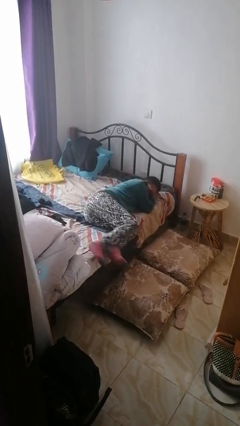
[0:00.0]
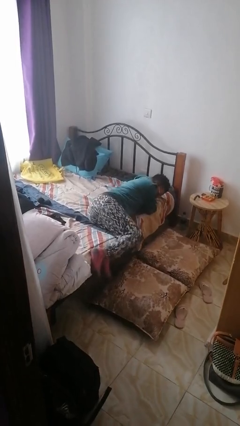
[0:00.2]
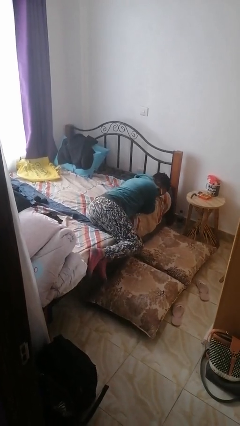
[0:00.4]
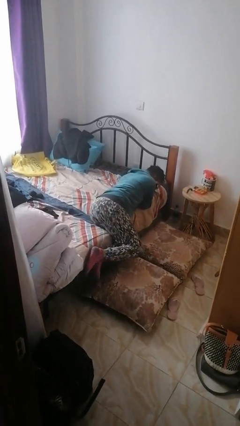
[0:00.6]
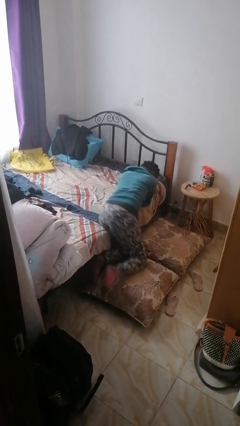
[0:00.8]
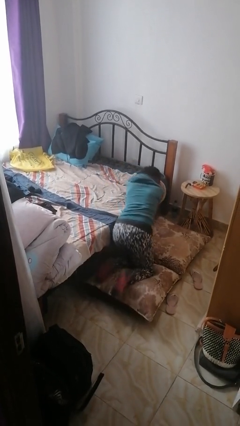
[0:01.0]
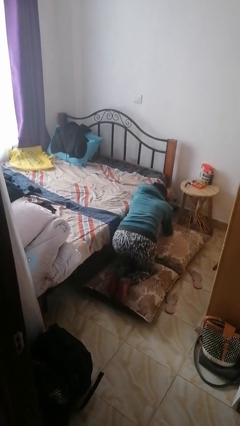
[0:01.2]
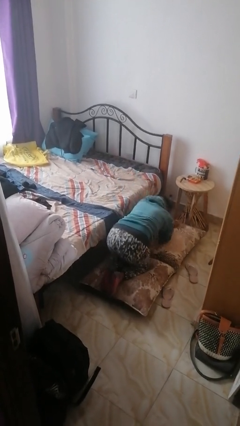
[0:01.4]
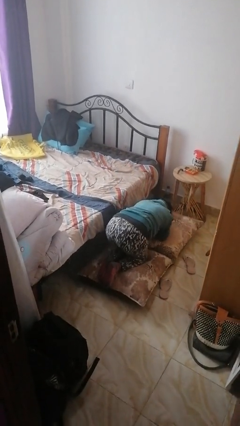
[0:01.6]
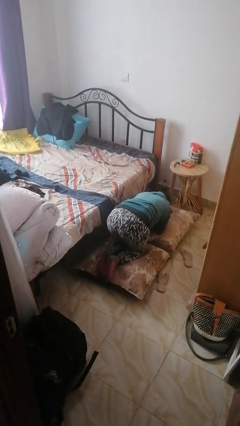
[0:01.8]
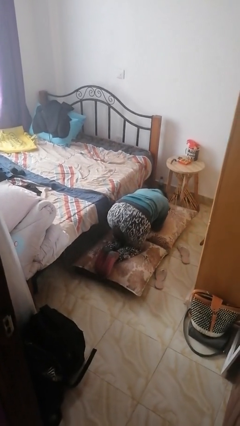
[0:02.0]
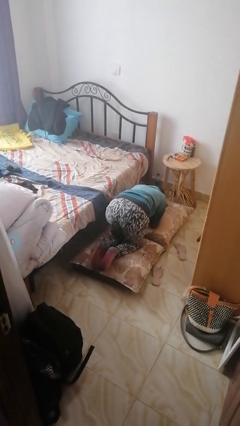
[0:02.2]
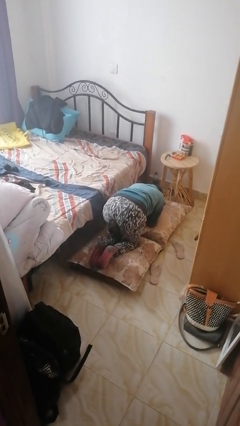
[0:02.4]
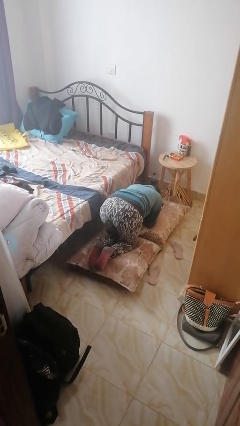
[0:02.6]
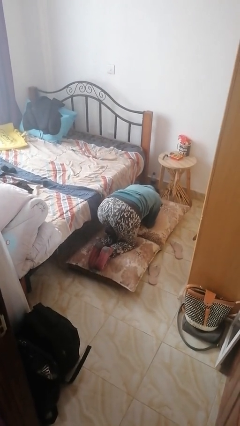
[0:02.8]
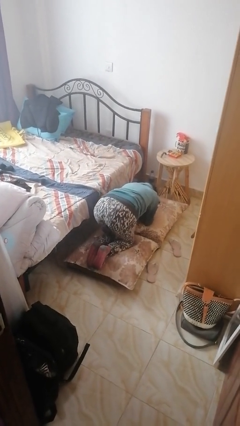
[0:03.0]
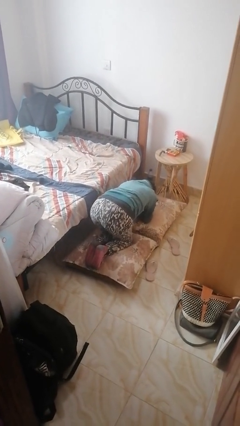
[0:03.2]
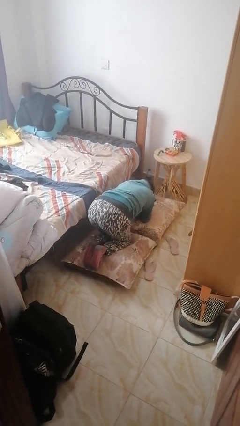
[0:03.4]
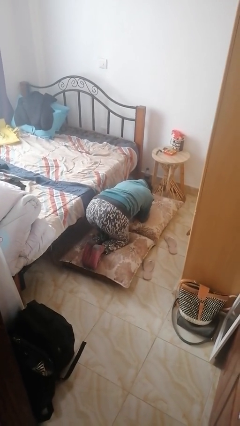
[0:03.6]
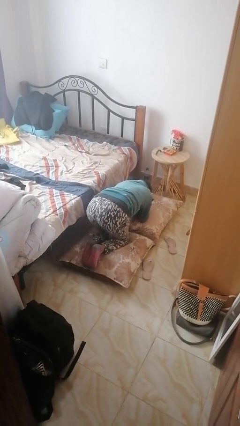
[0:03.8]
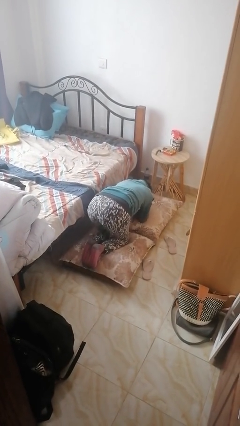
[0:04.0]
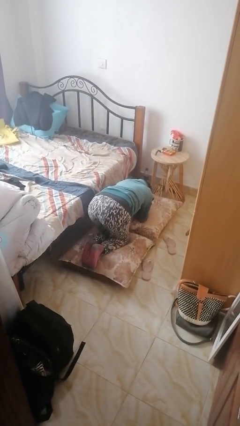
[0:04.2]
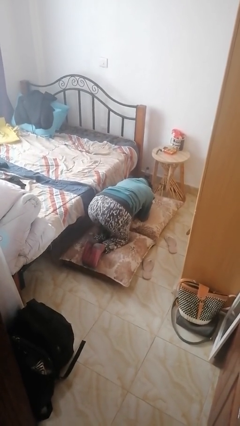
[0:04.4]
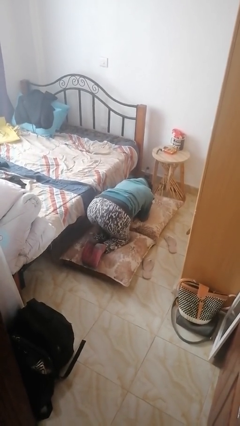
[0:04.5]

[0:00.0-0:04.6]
person falls from bed

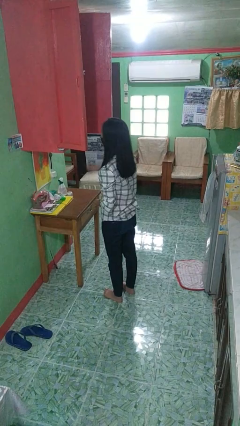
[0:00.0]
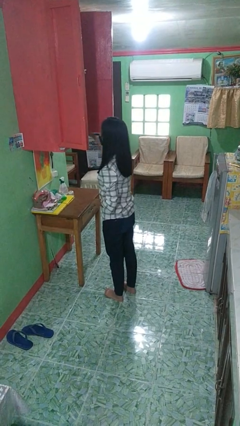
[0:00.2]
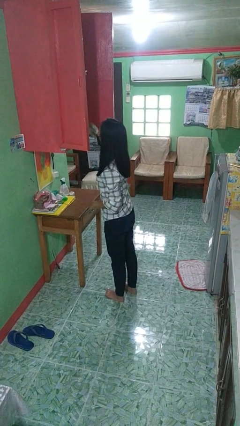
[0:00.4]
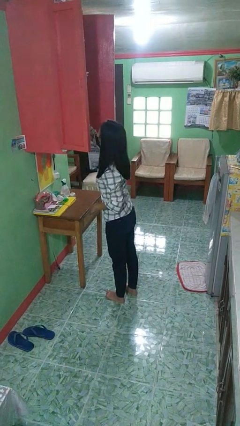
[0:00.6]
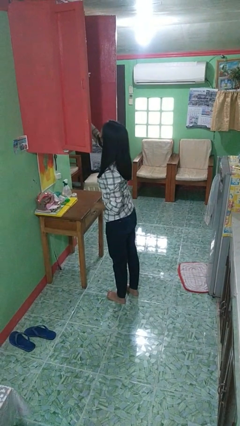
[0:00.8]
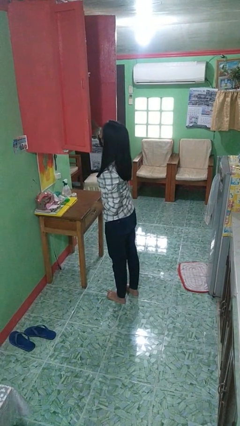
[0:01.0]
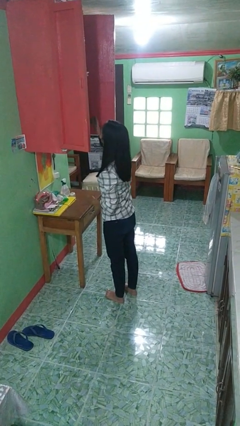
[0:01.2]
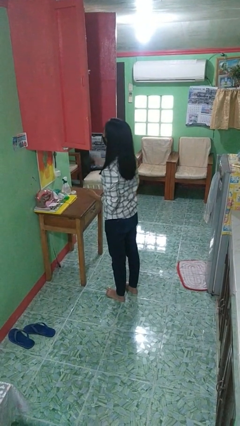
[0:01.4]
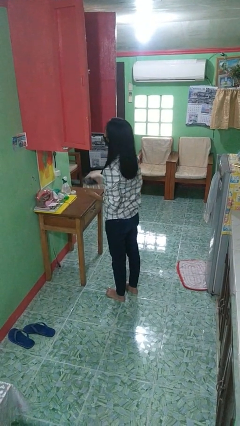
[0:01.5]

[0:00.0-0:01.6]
person picks up object from cabinet

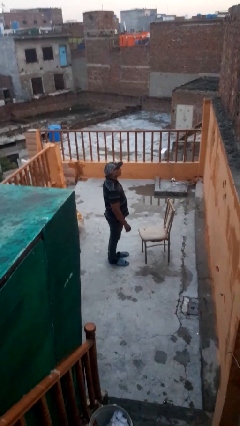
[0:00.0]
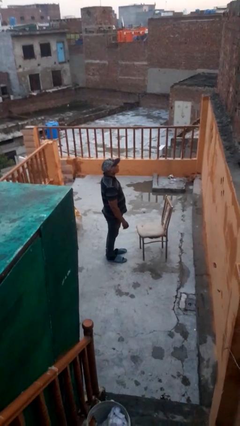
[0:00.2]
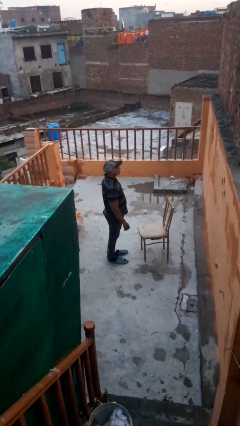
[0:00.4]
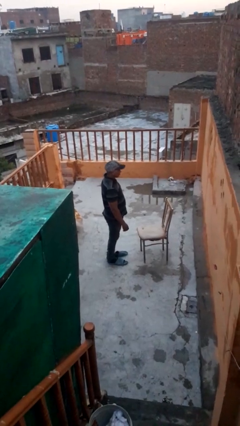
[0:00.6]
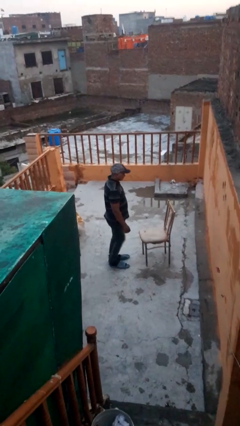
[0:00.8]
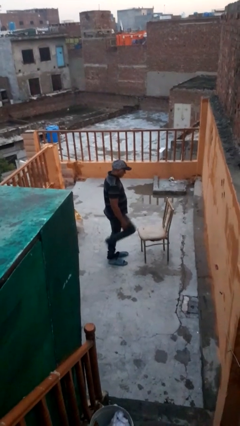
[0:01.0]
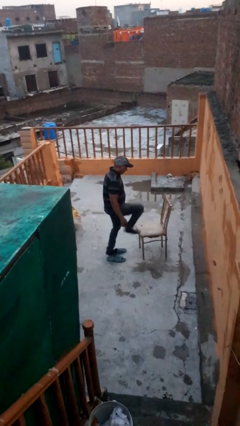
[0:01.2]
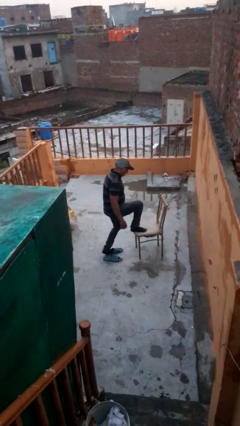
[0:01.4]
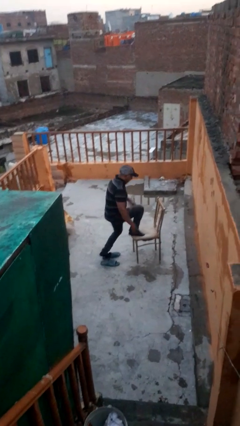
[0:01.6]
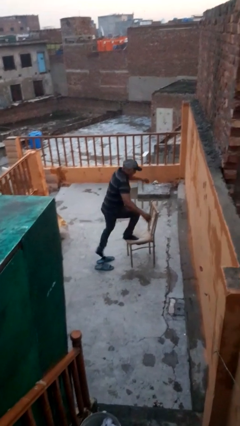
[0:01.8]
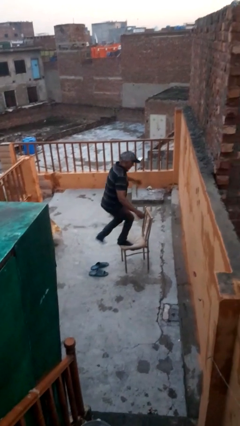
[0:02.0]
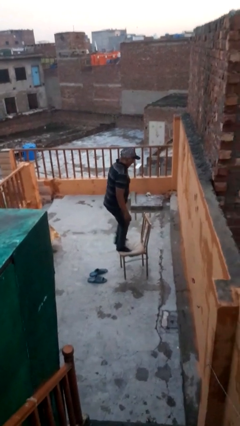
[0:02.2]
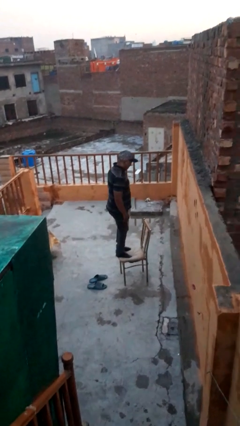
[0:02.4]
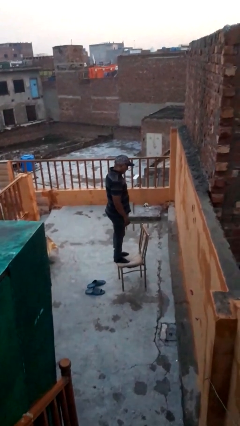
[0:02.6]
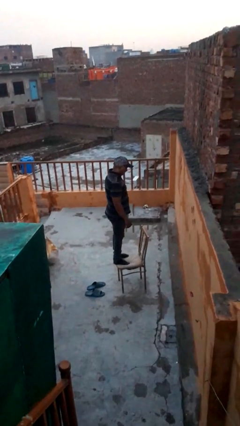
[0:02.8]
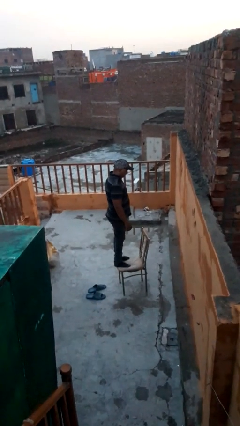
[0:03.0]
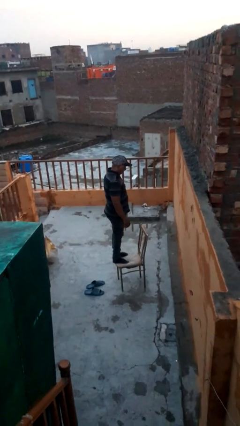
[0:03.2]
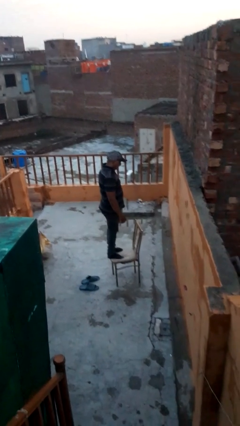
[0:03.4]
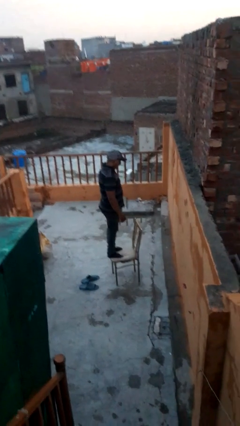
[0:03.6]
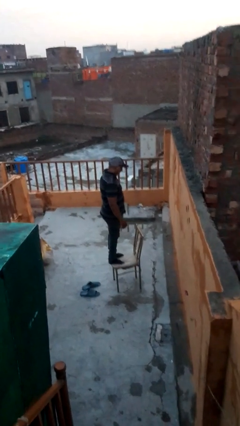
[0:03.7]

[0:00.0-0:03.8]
person climbs on chair

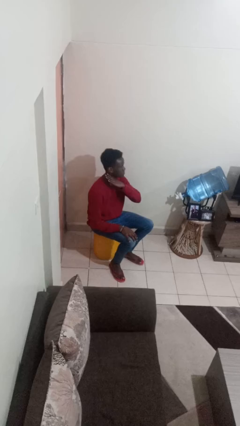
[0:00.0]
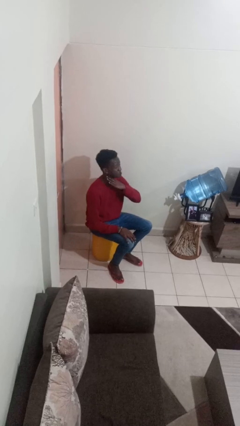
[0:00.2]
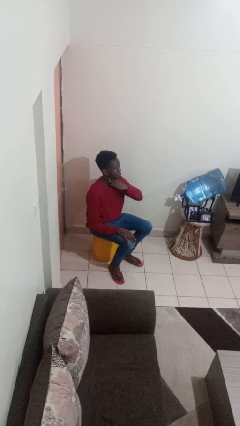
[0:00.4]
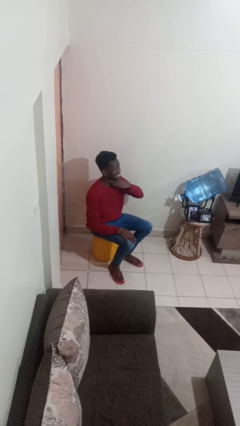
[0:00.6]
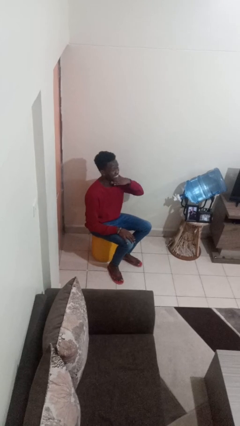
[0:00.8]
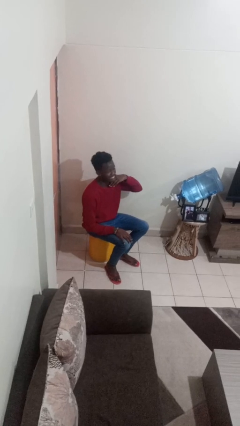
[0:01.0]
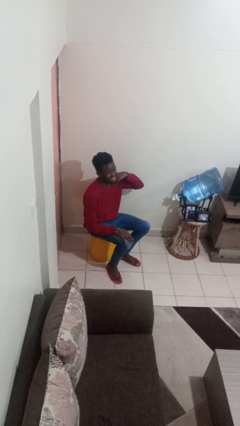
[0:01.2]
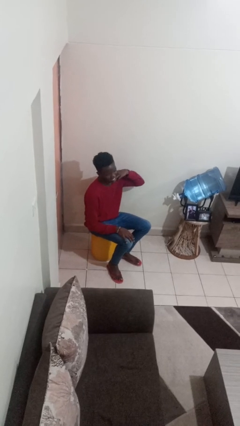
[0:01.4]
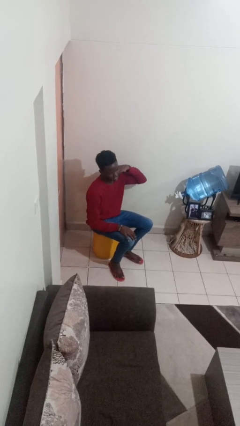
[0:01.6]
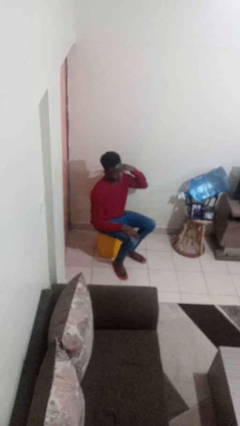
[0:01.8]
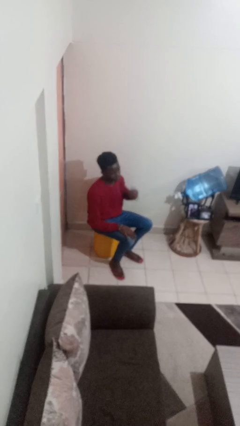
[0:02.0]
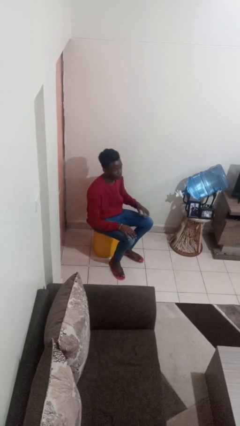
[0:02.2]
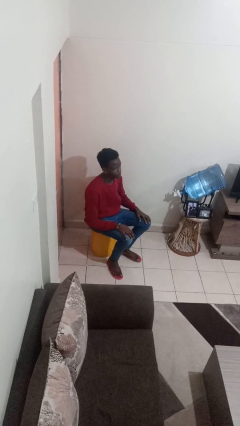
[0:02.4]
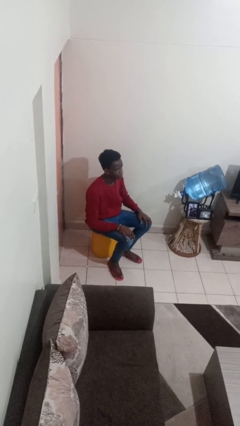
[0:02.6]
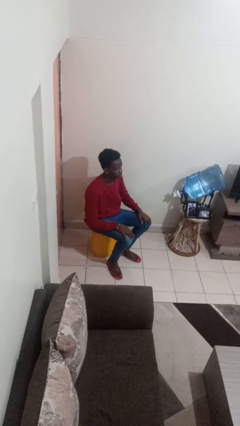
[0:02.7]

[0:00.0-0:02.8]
person gestures cut

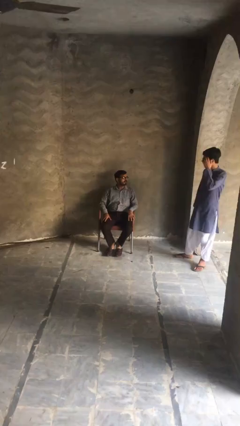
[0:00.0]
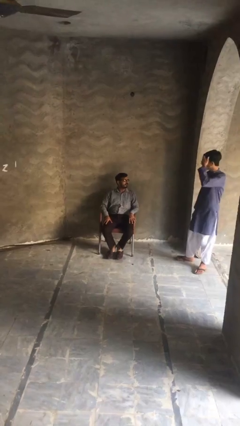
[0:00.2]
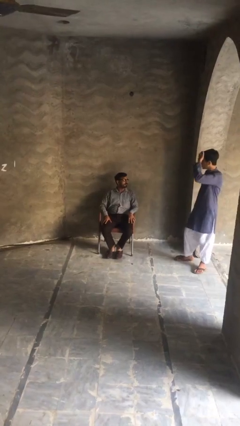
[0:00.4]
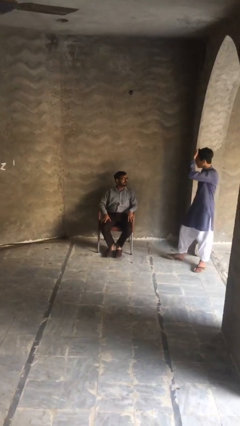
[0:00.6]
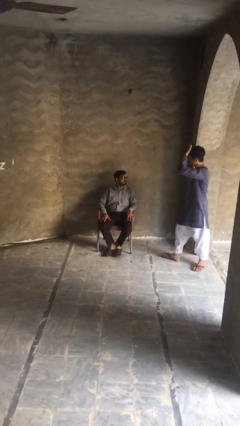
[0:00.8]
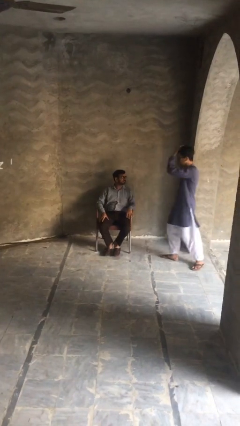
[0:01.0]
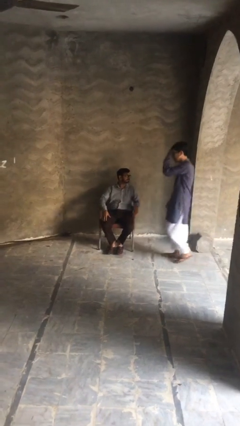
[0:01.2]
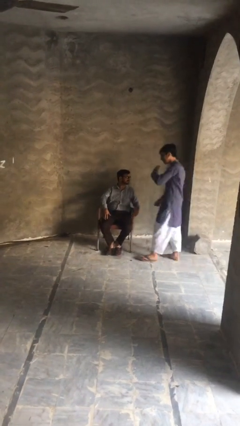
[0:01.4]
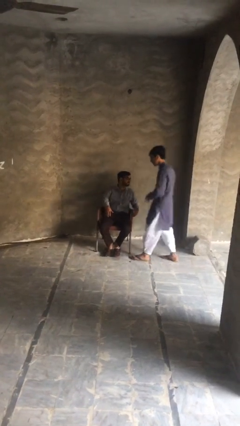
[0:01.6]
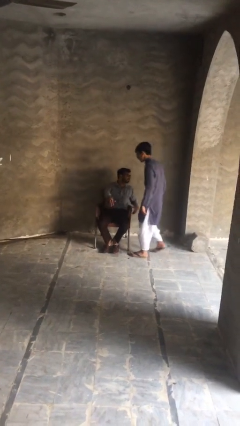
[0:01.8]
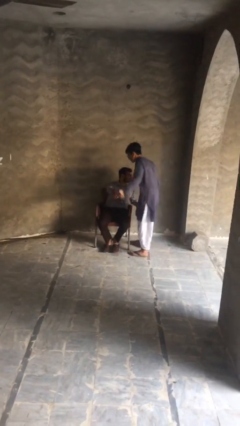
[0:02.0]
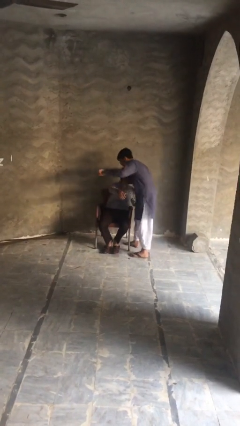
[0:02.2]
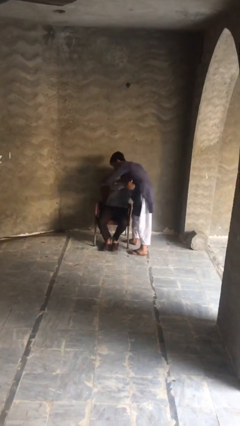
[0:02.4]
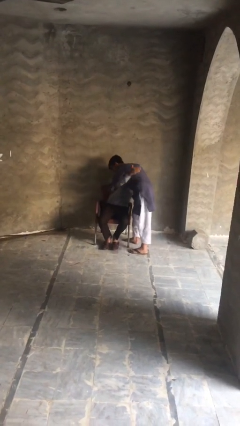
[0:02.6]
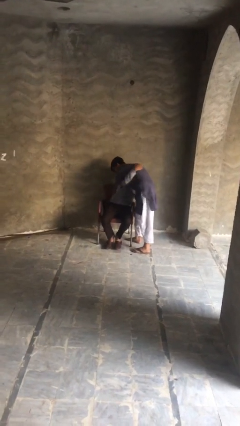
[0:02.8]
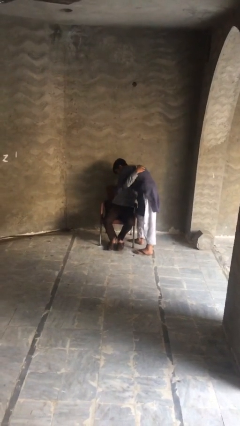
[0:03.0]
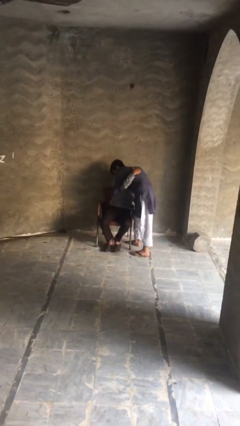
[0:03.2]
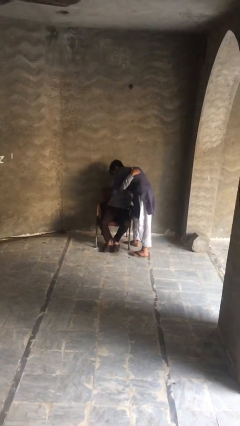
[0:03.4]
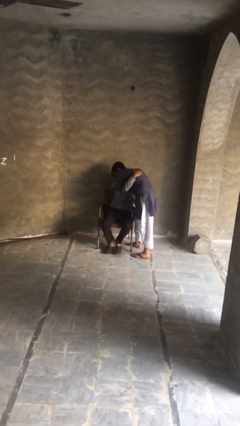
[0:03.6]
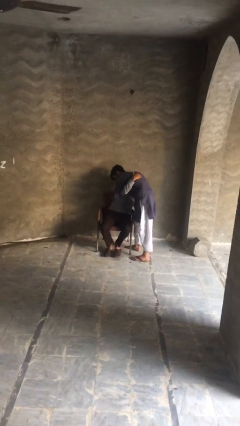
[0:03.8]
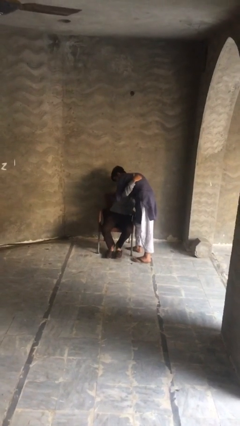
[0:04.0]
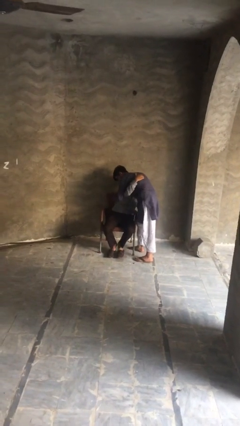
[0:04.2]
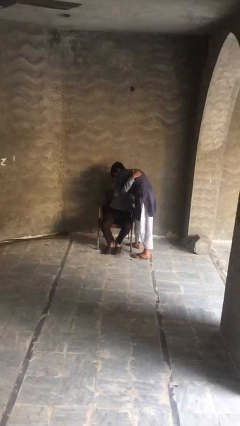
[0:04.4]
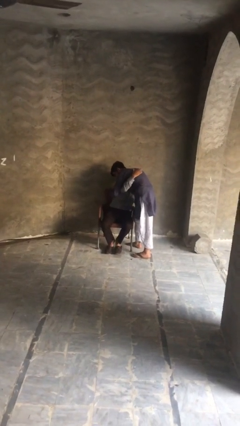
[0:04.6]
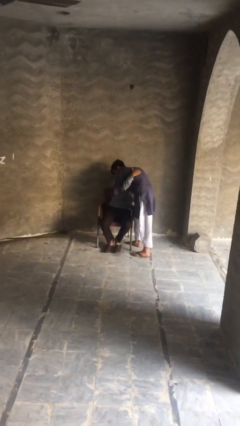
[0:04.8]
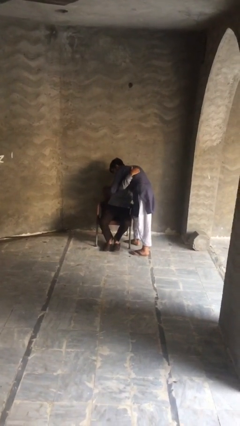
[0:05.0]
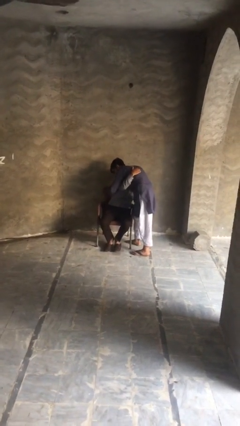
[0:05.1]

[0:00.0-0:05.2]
person embraces person
